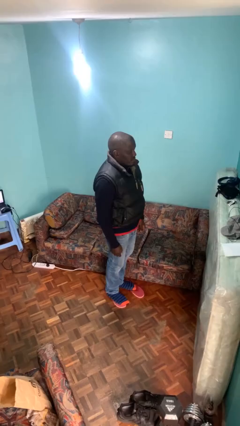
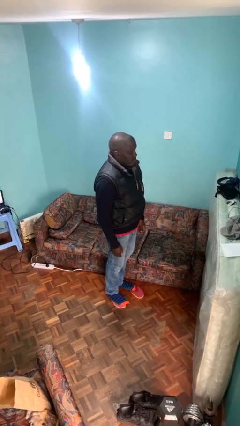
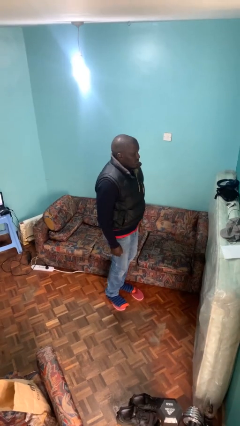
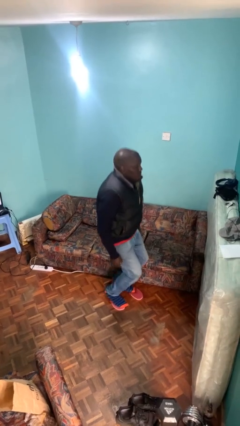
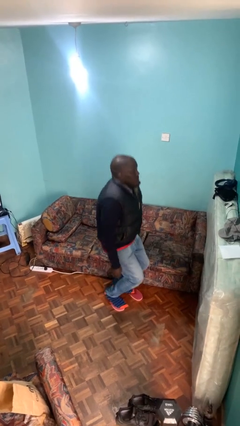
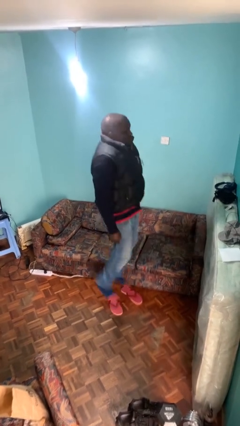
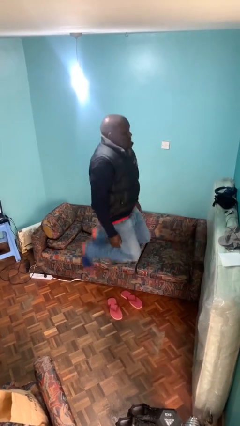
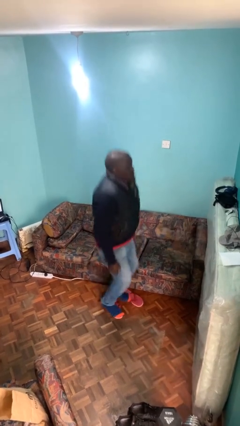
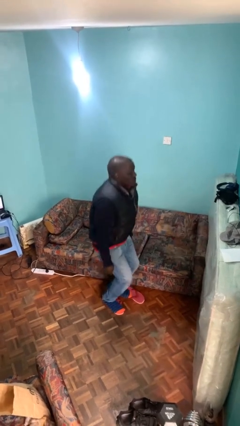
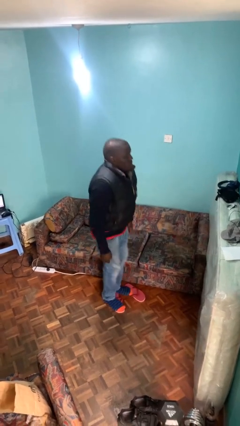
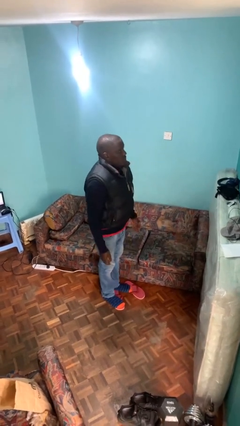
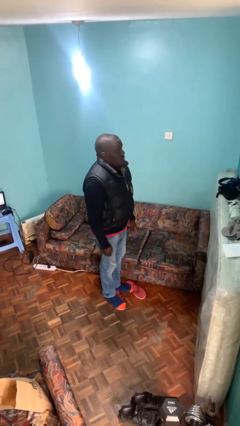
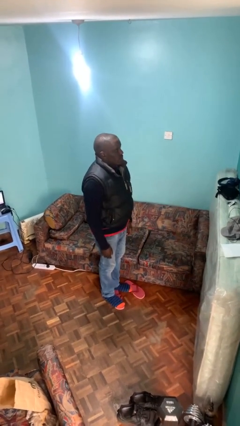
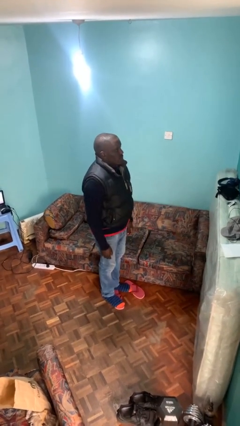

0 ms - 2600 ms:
person jumps

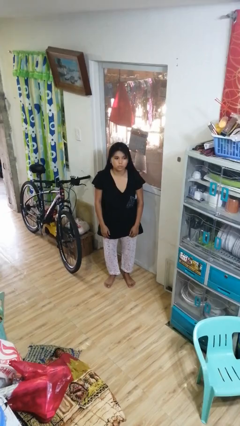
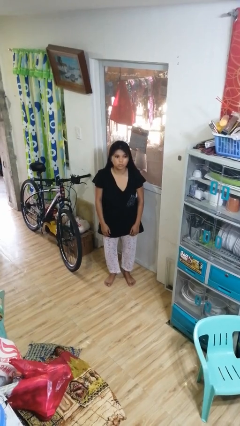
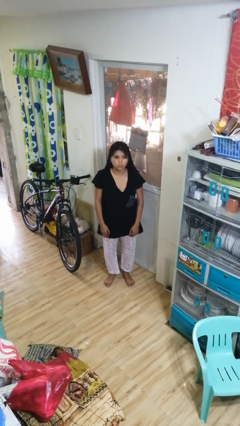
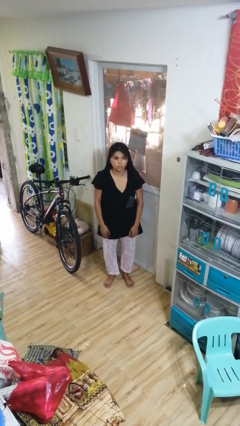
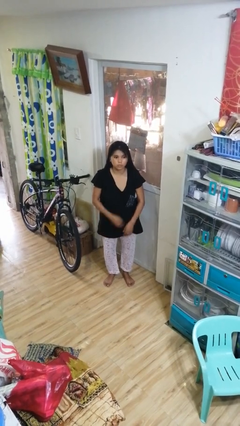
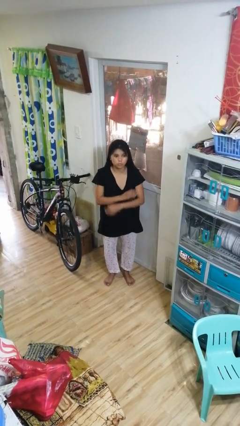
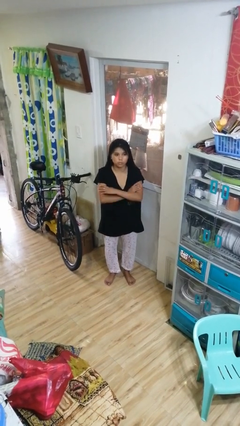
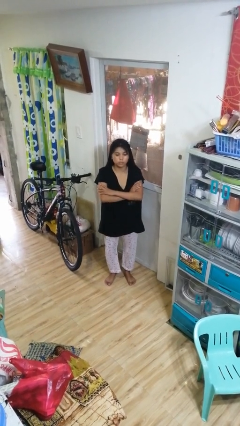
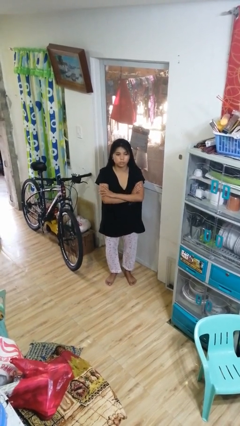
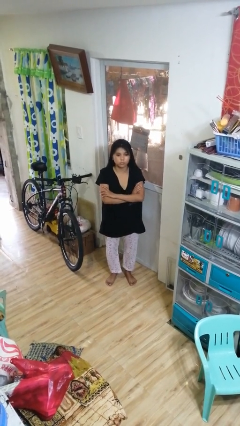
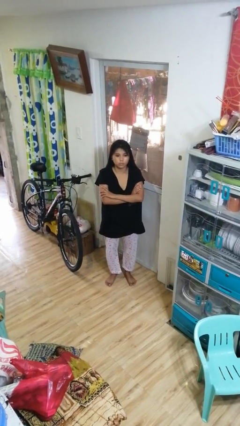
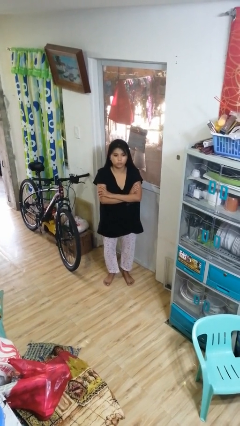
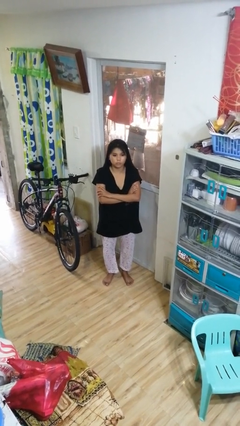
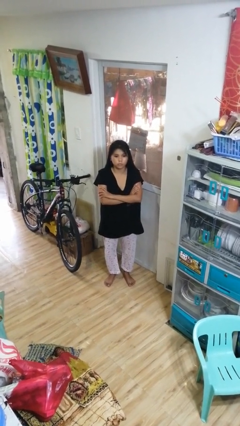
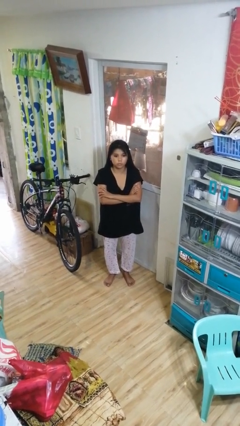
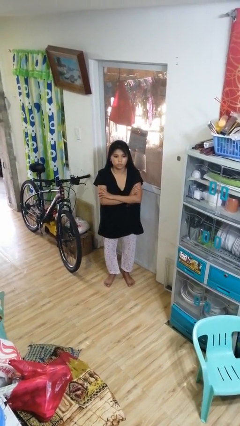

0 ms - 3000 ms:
person crosses arms

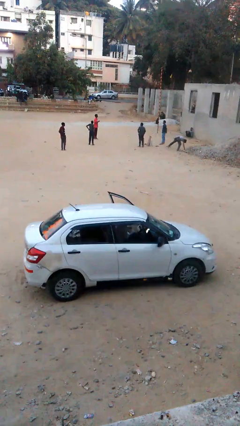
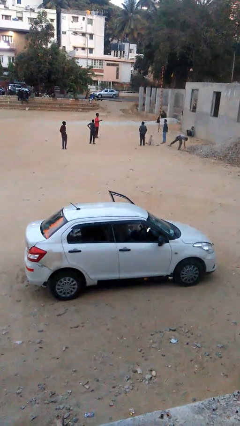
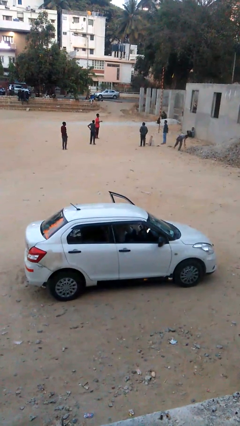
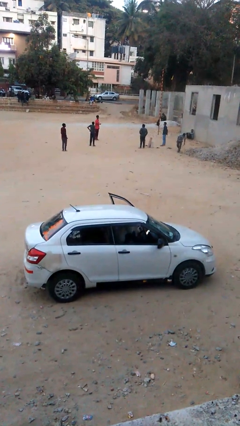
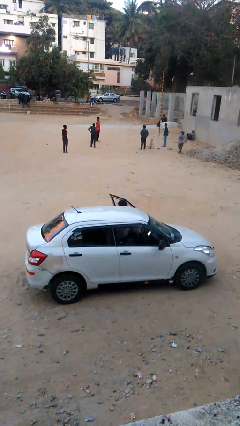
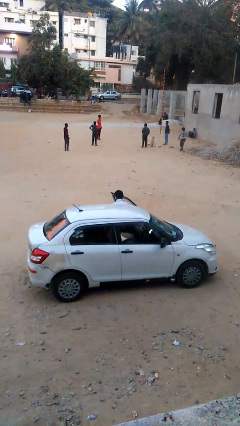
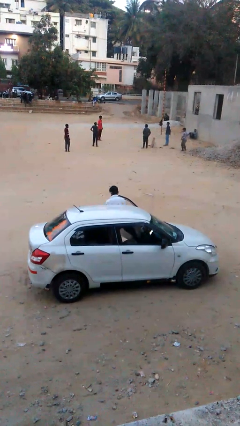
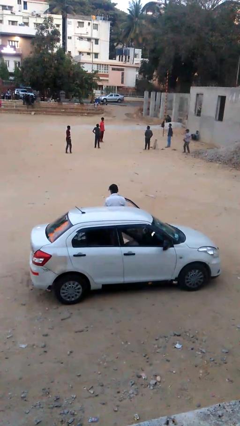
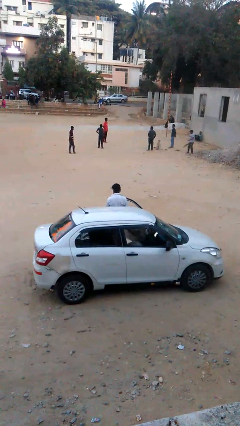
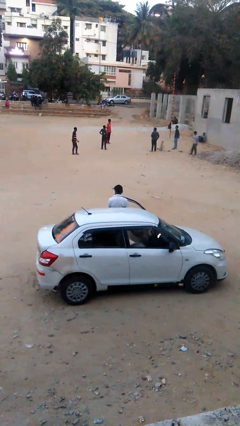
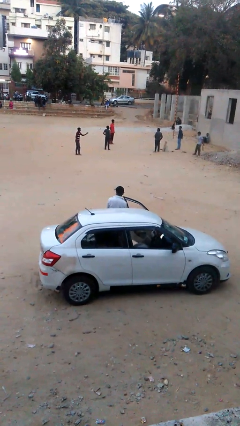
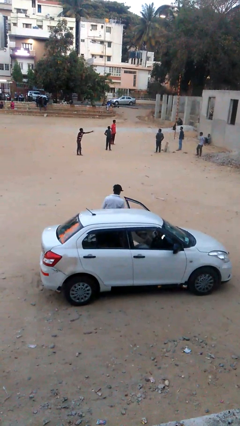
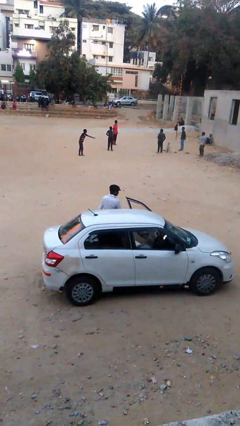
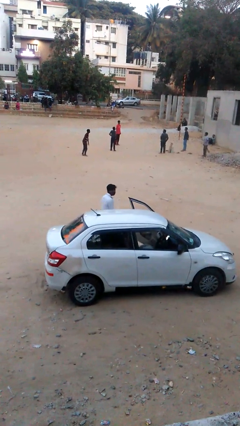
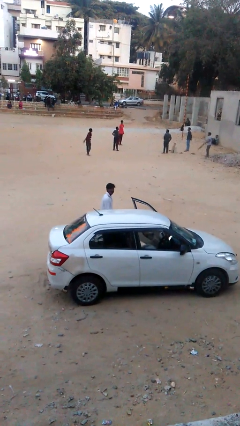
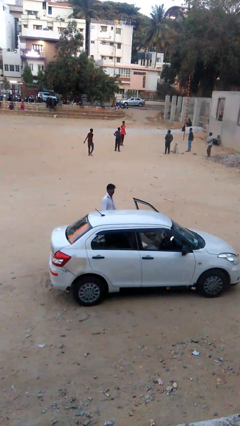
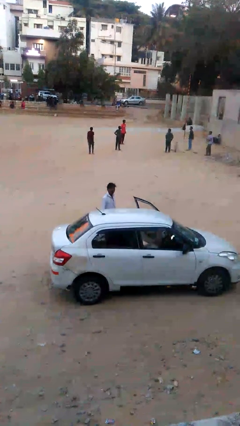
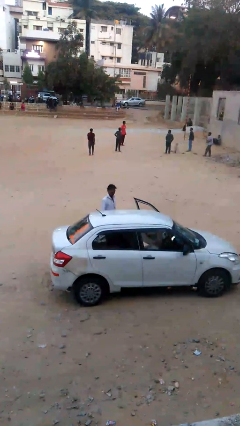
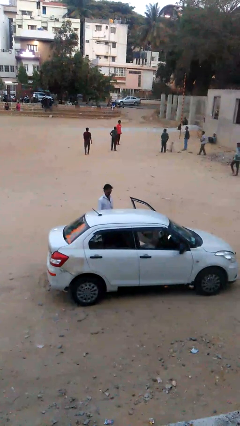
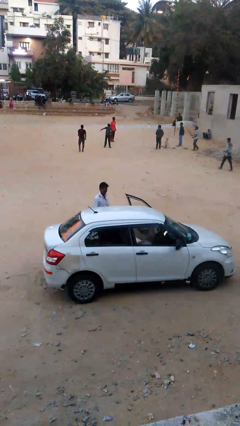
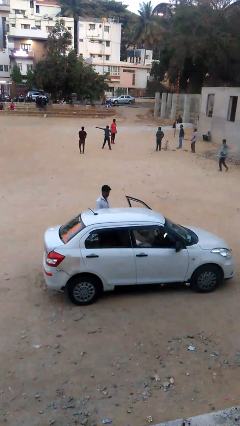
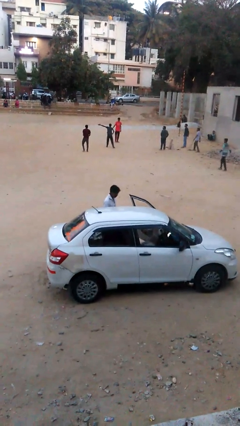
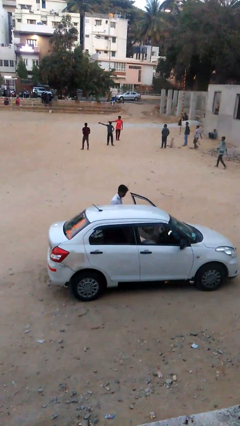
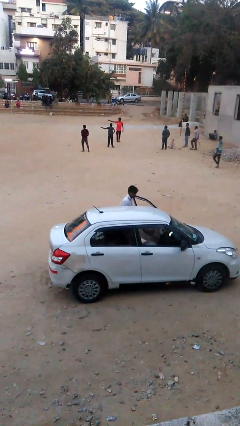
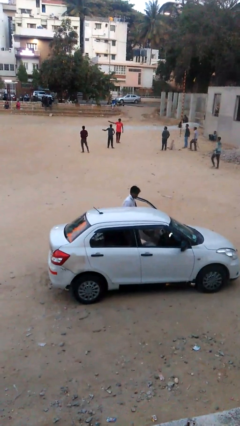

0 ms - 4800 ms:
person exits car

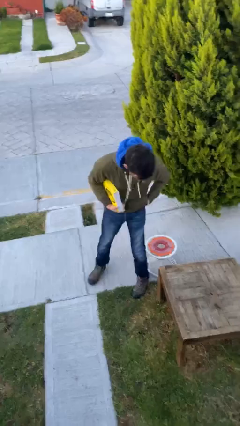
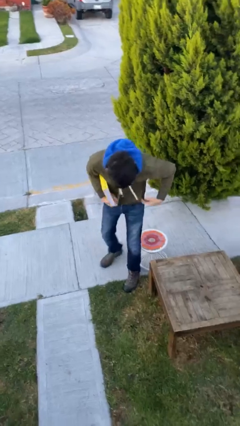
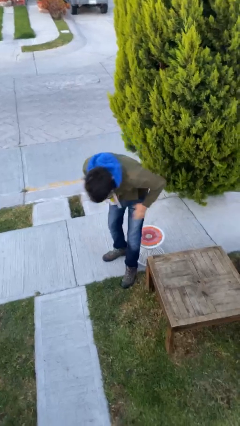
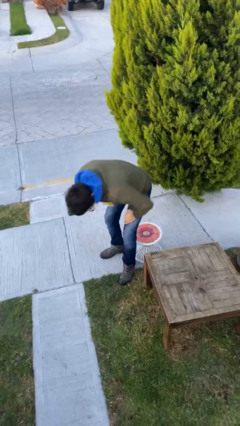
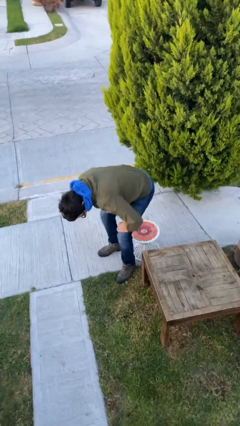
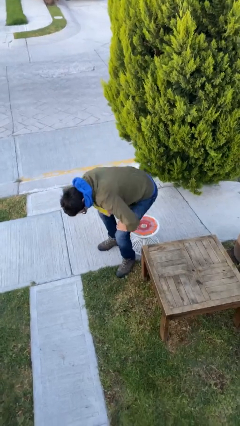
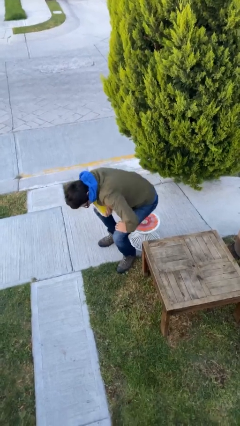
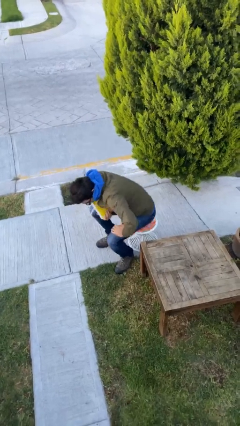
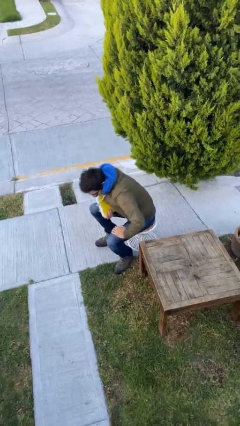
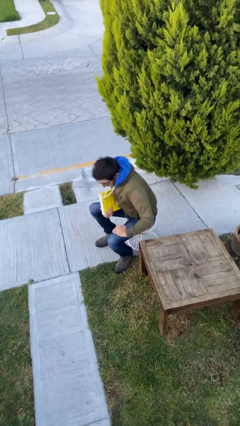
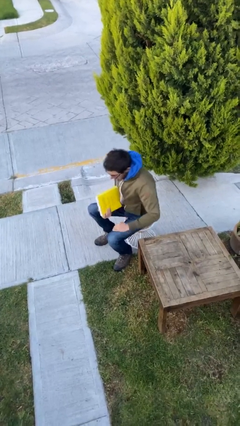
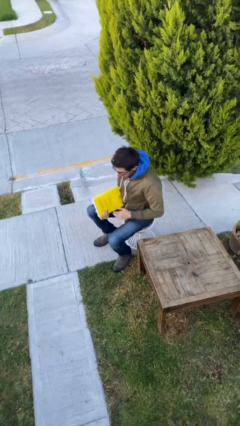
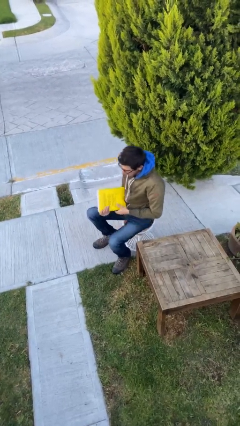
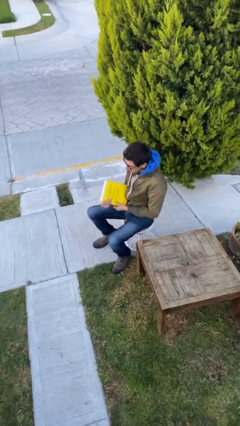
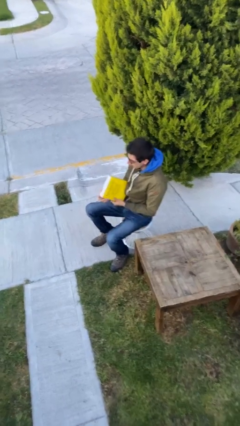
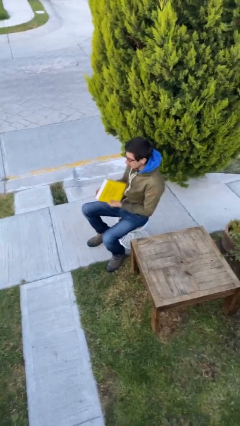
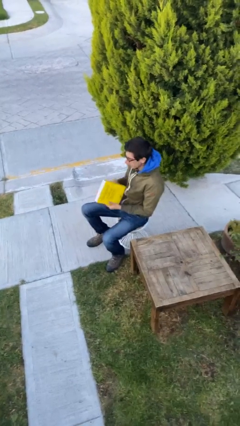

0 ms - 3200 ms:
person sits down

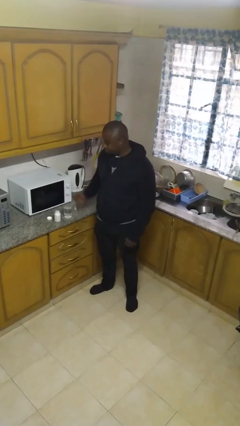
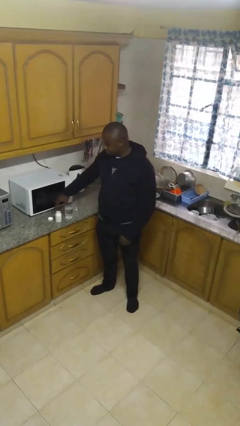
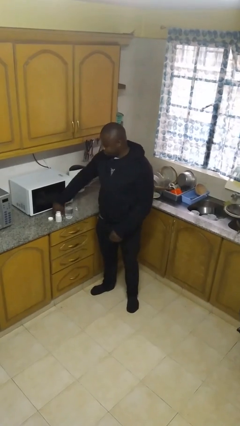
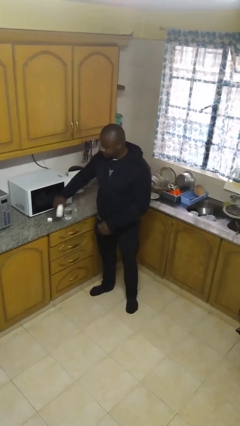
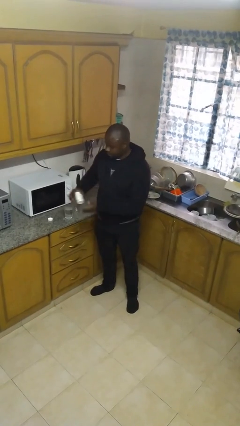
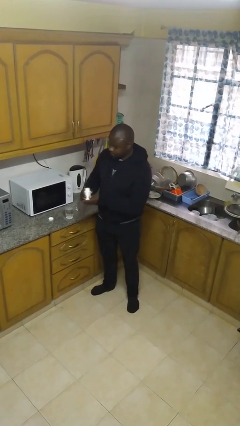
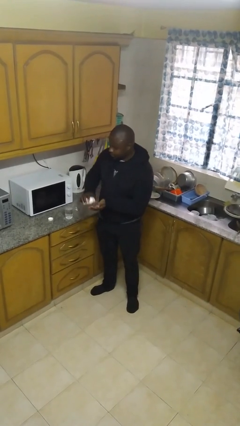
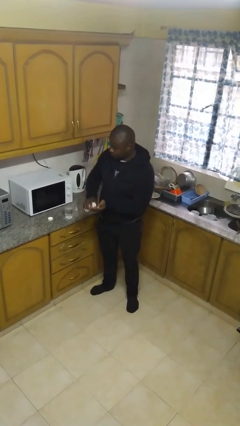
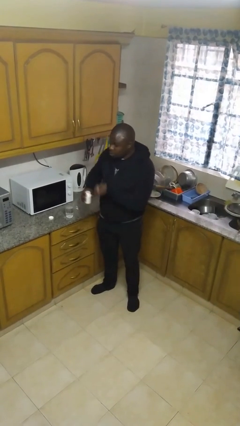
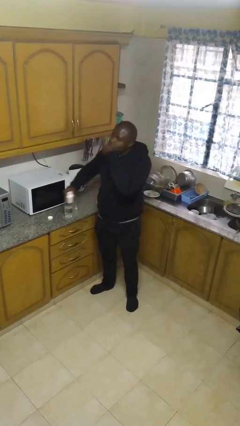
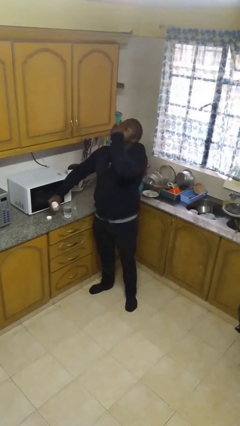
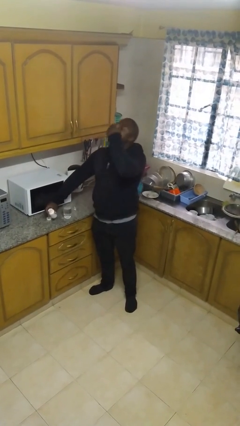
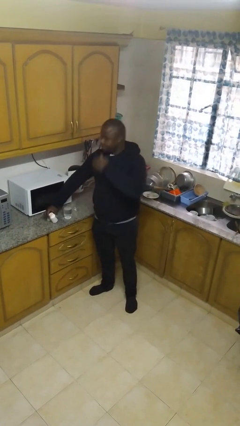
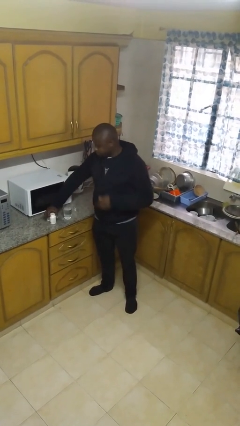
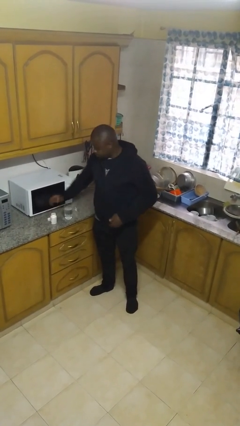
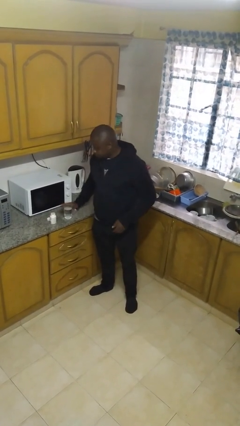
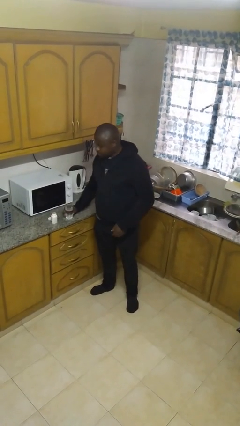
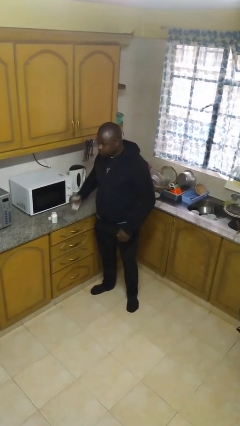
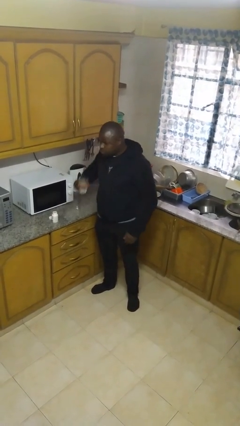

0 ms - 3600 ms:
person takes medicine pills

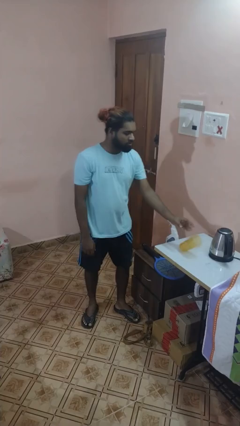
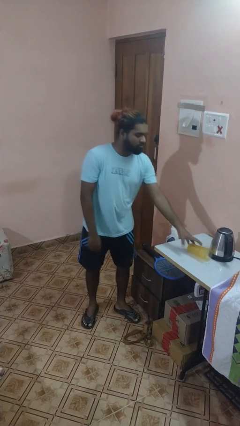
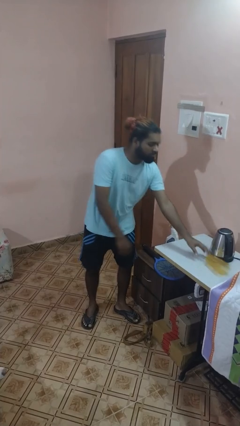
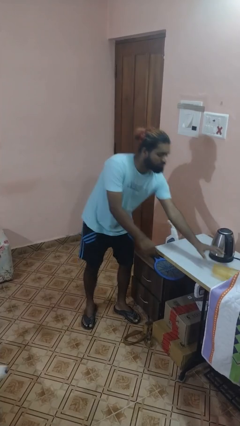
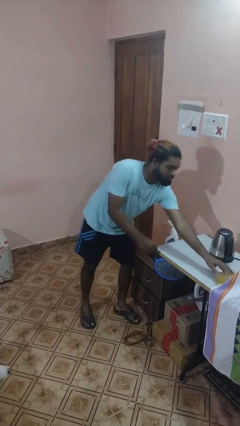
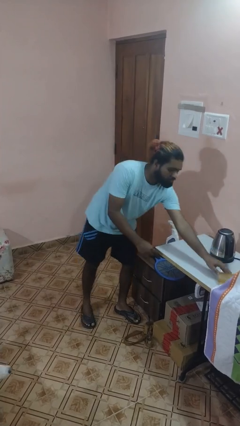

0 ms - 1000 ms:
person knocks over glass
